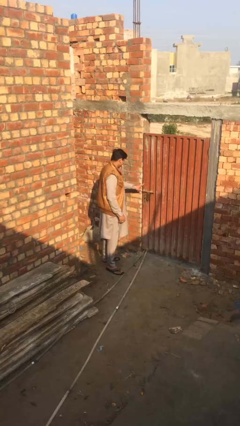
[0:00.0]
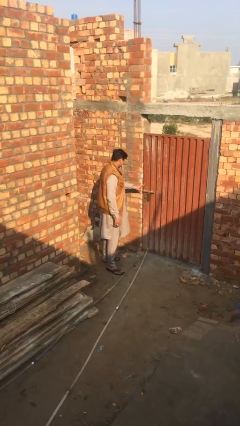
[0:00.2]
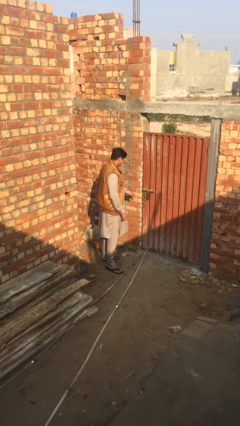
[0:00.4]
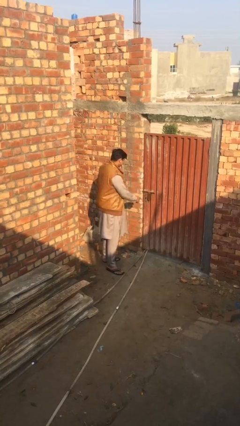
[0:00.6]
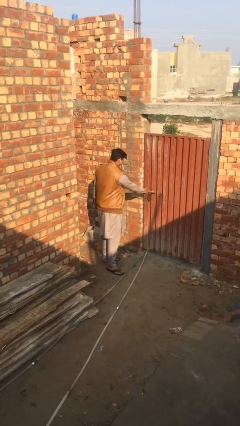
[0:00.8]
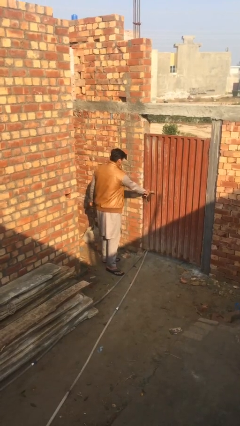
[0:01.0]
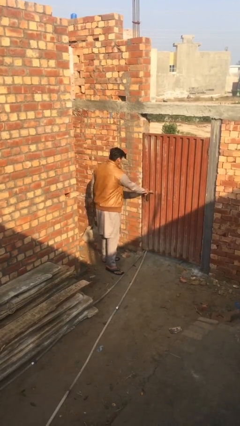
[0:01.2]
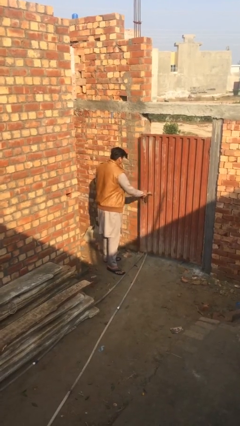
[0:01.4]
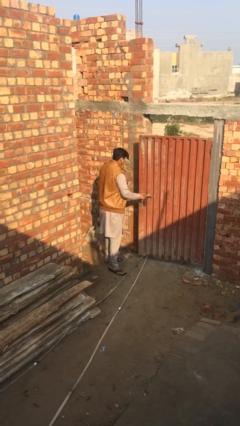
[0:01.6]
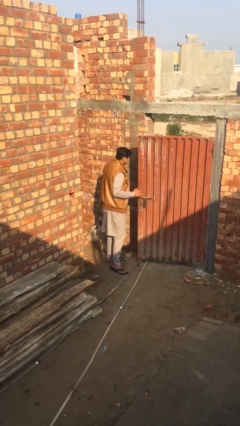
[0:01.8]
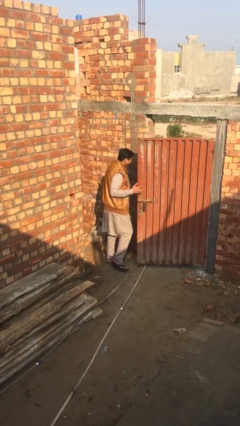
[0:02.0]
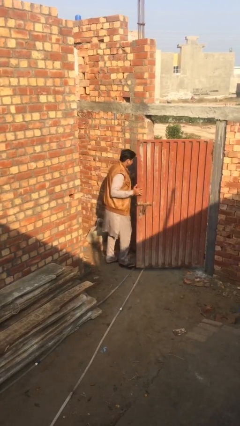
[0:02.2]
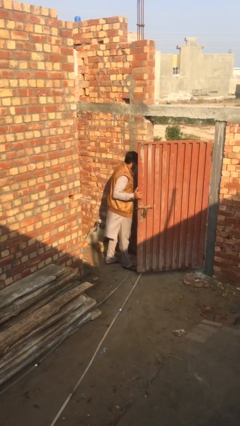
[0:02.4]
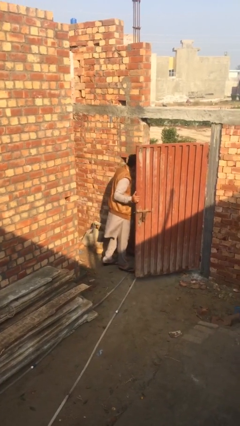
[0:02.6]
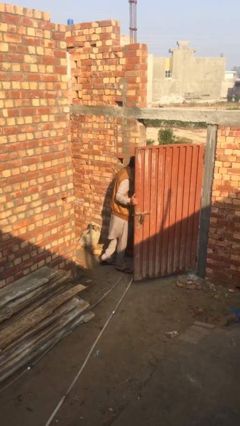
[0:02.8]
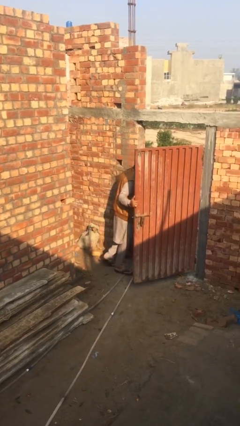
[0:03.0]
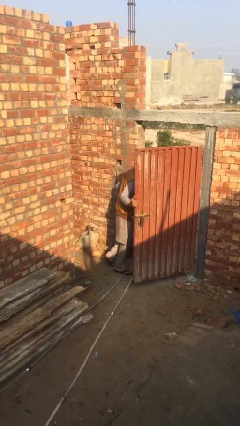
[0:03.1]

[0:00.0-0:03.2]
person opens facility door

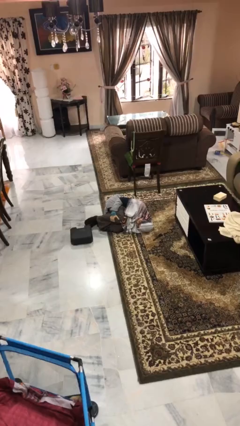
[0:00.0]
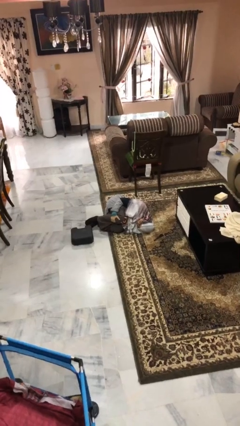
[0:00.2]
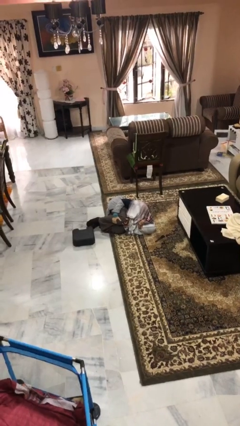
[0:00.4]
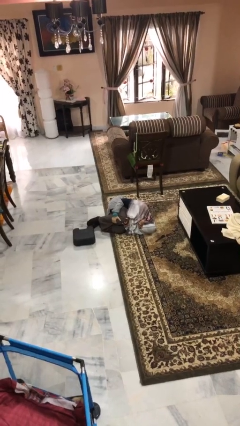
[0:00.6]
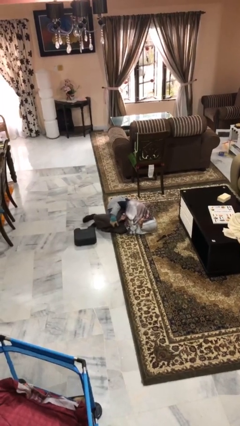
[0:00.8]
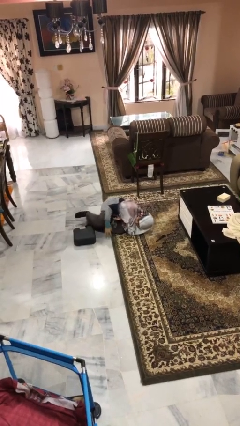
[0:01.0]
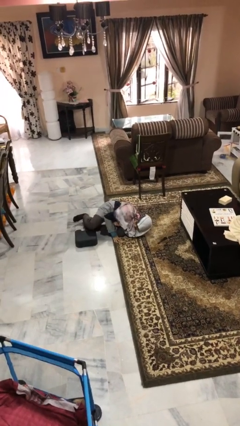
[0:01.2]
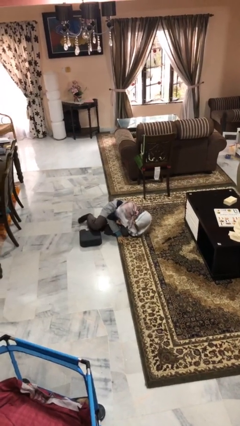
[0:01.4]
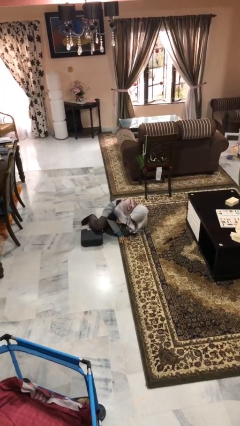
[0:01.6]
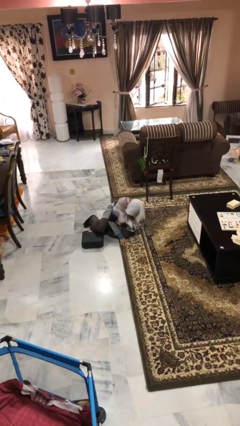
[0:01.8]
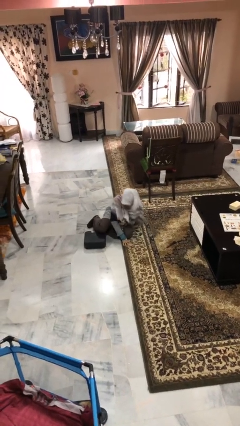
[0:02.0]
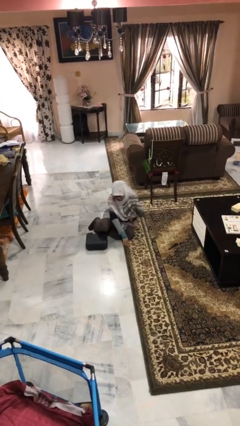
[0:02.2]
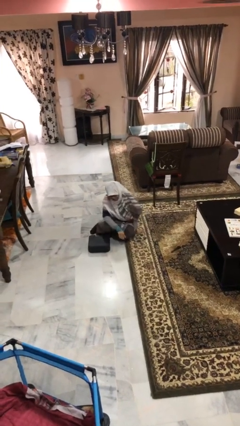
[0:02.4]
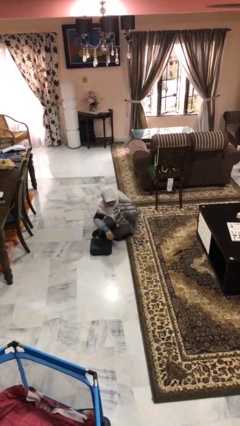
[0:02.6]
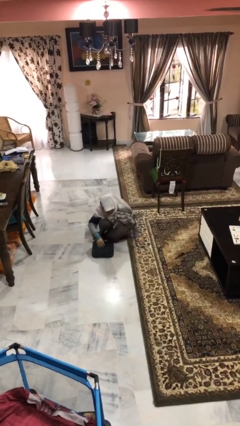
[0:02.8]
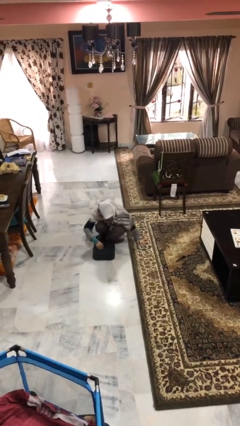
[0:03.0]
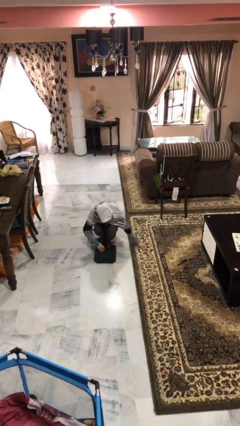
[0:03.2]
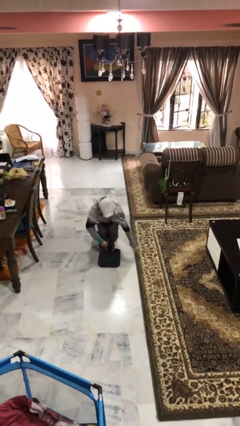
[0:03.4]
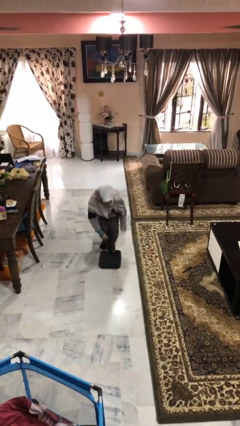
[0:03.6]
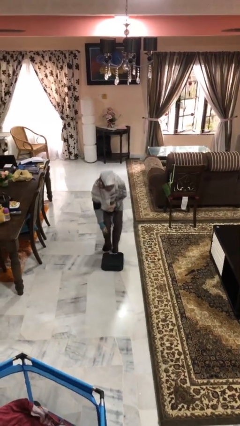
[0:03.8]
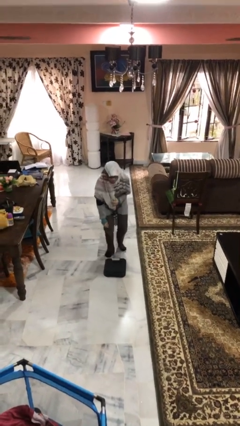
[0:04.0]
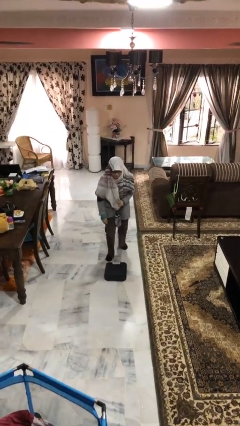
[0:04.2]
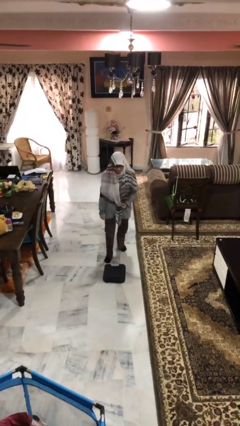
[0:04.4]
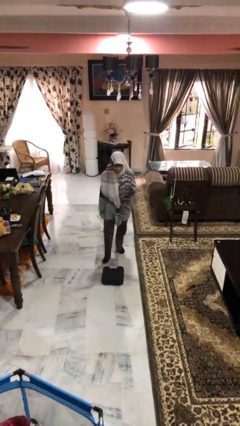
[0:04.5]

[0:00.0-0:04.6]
person stands up from floor

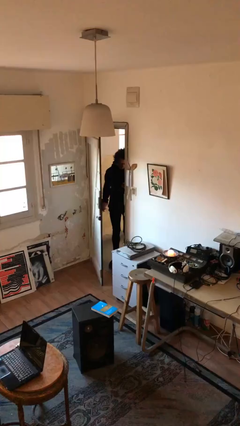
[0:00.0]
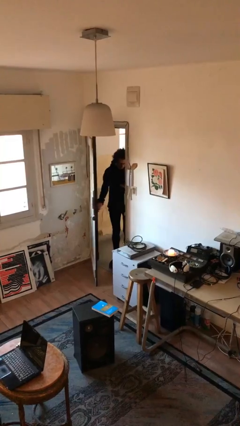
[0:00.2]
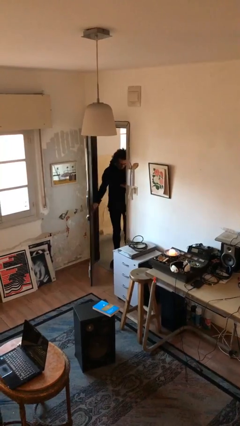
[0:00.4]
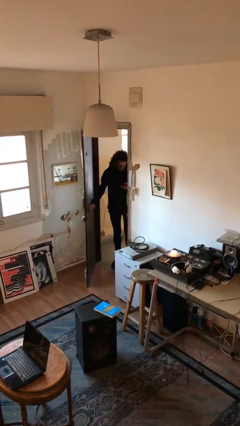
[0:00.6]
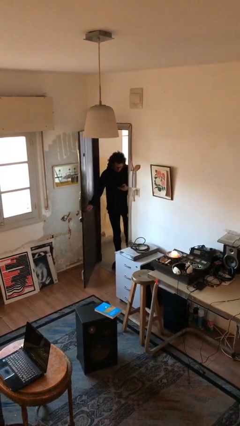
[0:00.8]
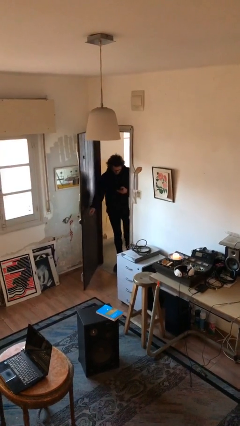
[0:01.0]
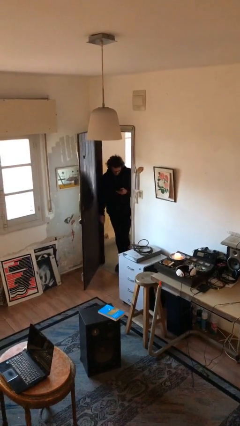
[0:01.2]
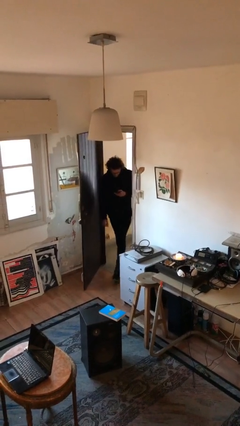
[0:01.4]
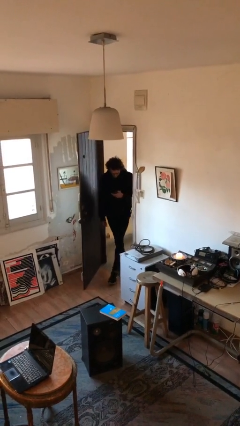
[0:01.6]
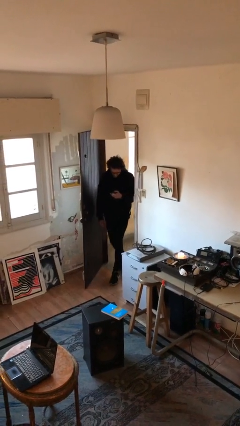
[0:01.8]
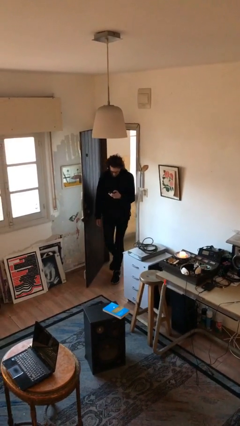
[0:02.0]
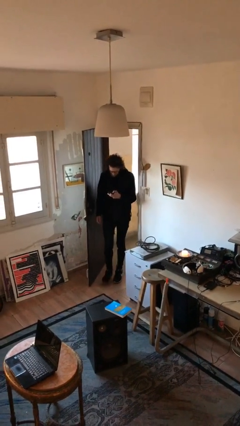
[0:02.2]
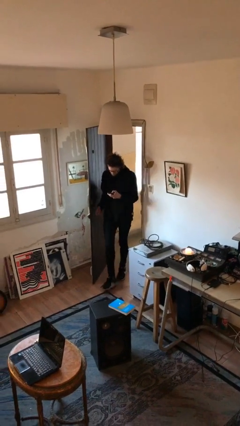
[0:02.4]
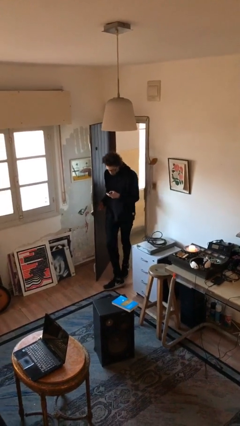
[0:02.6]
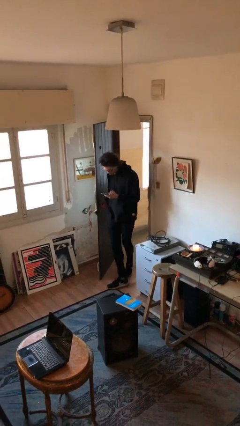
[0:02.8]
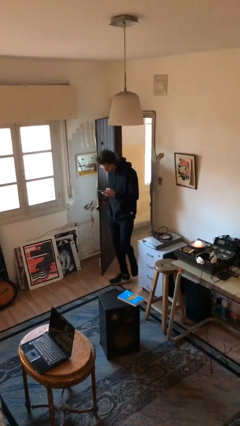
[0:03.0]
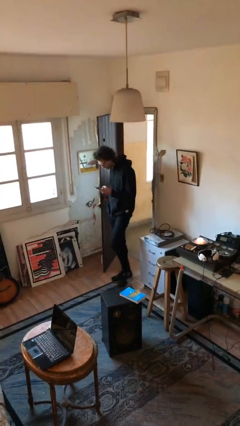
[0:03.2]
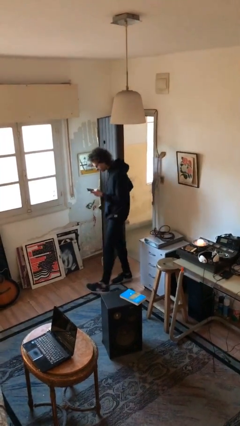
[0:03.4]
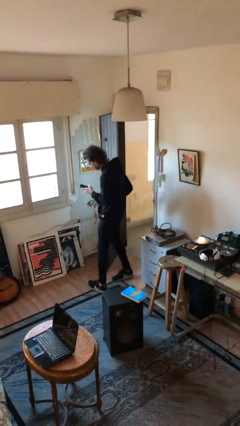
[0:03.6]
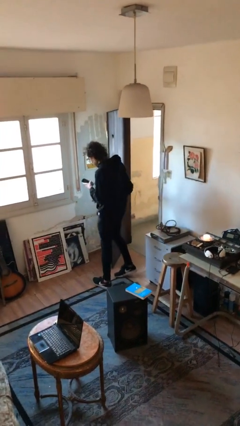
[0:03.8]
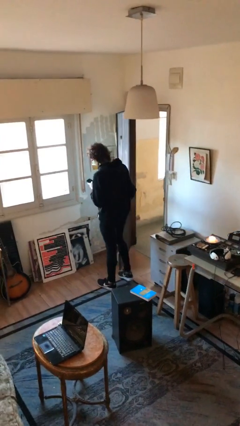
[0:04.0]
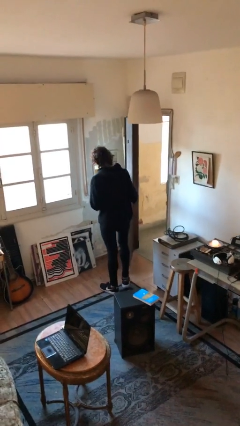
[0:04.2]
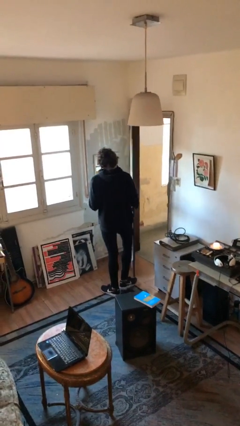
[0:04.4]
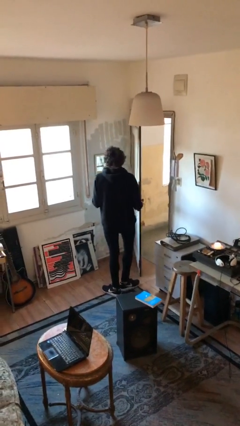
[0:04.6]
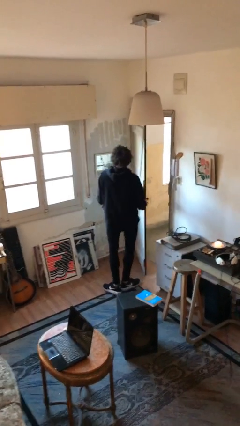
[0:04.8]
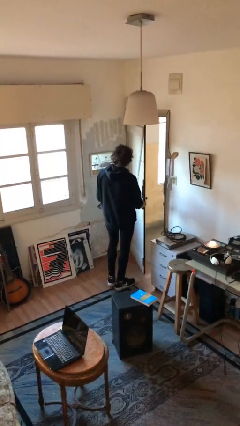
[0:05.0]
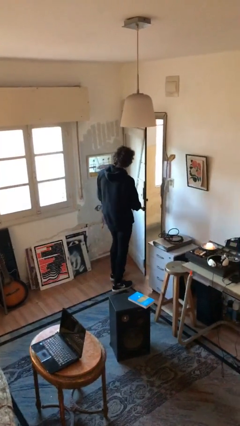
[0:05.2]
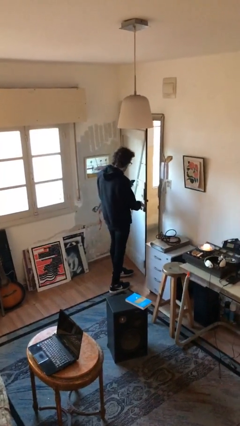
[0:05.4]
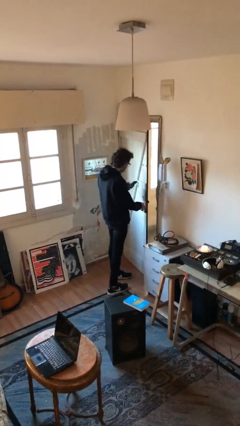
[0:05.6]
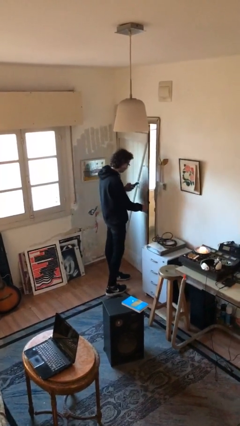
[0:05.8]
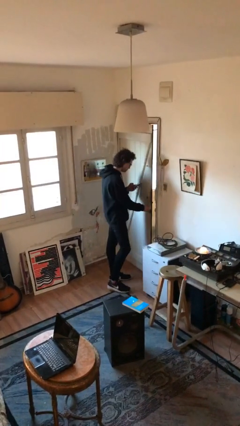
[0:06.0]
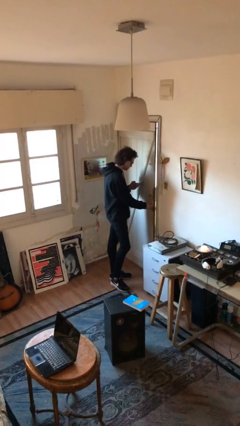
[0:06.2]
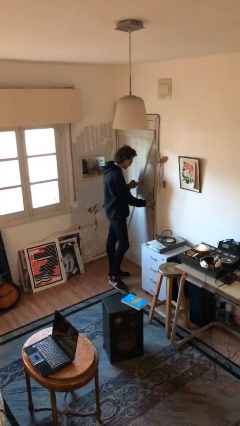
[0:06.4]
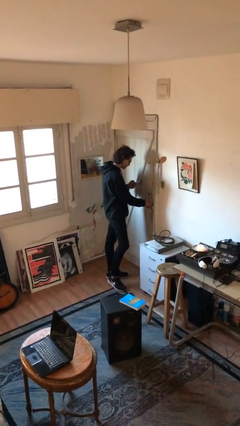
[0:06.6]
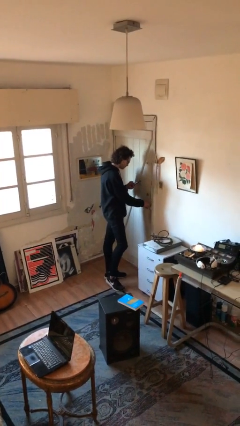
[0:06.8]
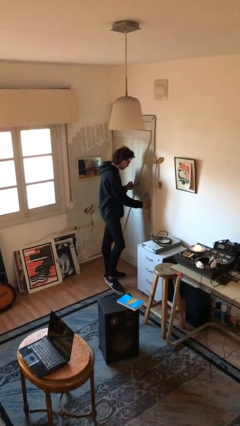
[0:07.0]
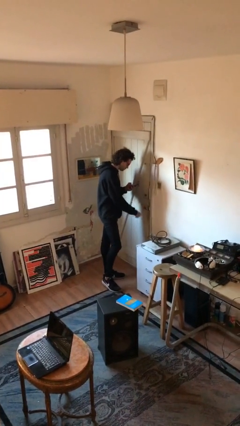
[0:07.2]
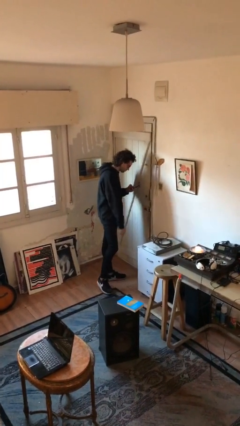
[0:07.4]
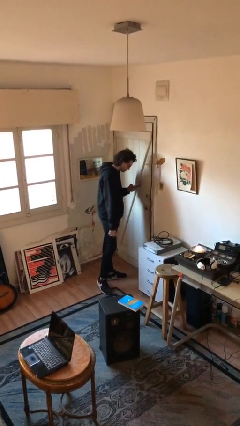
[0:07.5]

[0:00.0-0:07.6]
person texts on phone

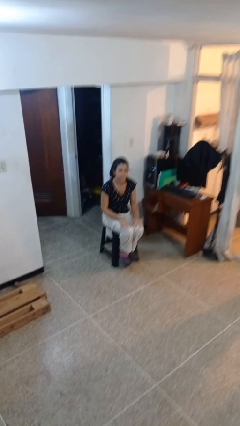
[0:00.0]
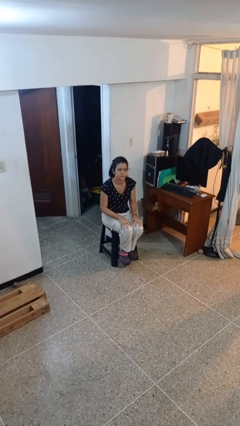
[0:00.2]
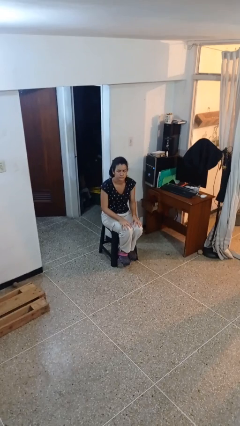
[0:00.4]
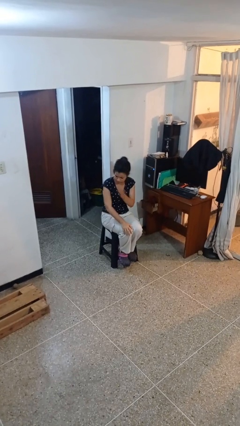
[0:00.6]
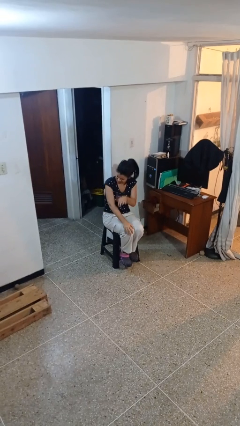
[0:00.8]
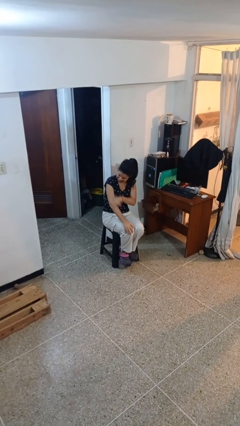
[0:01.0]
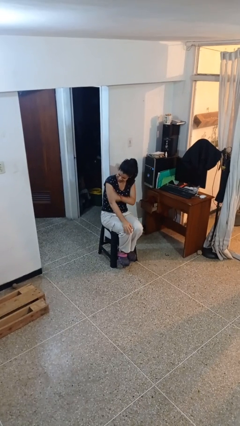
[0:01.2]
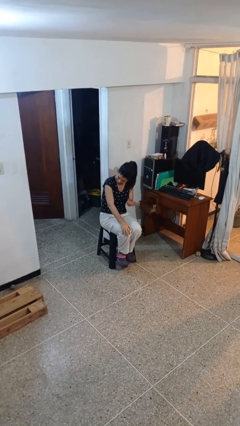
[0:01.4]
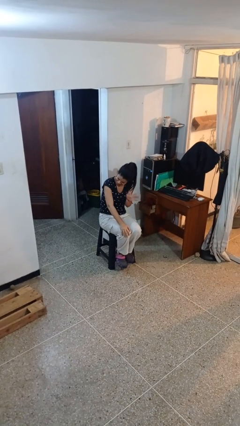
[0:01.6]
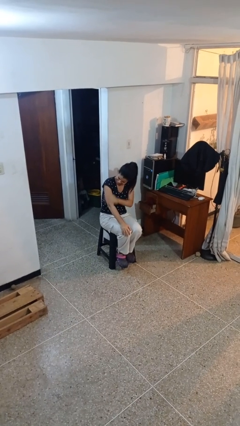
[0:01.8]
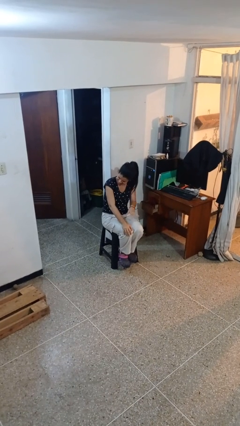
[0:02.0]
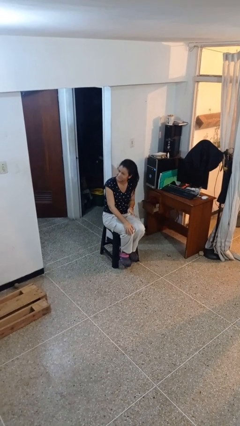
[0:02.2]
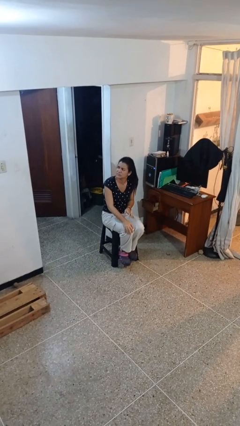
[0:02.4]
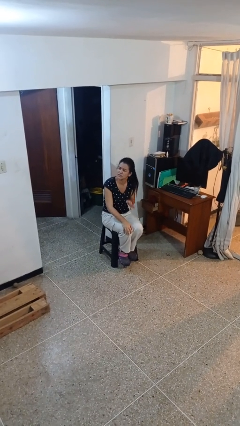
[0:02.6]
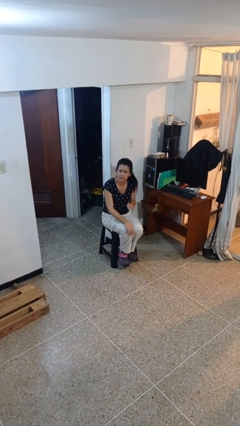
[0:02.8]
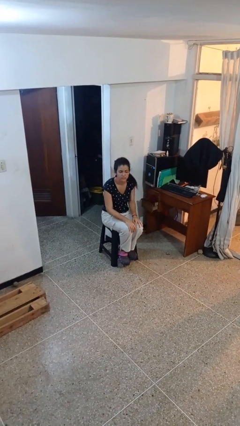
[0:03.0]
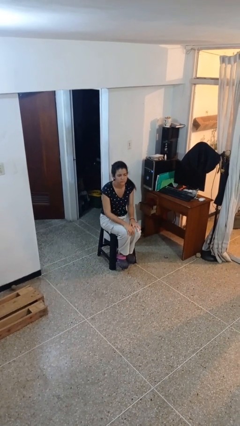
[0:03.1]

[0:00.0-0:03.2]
person swats bug
